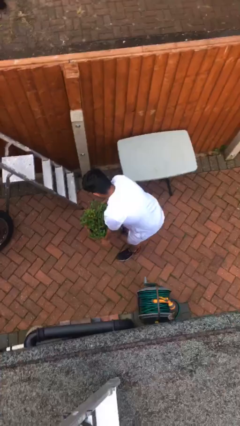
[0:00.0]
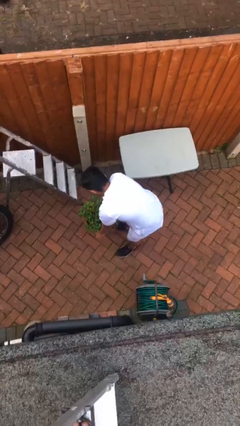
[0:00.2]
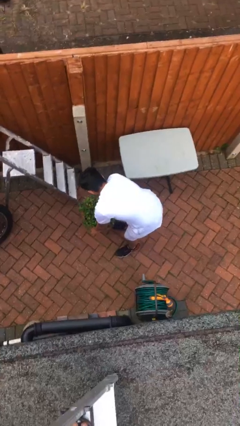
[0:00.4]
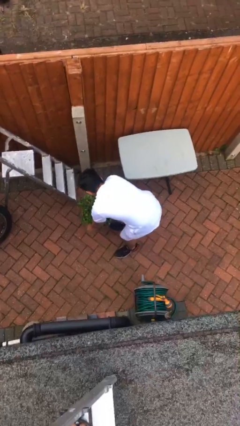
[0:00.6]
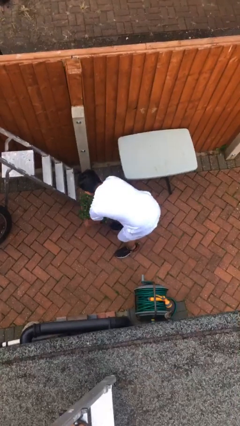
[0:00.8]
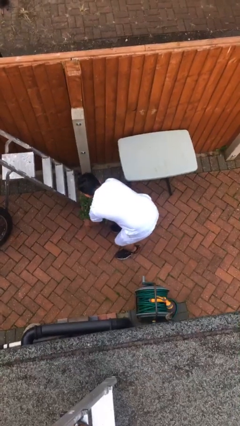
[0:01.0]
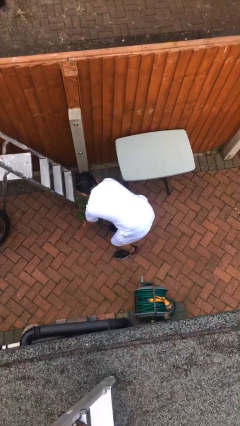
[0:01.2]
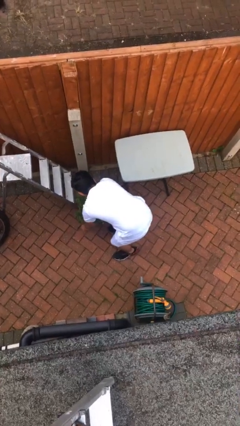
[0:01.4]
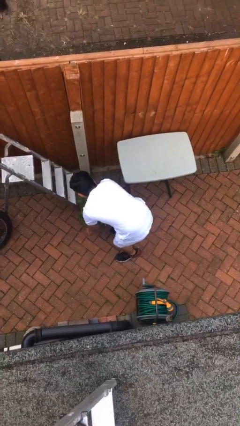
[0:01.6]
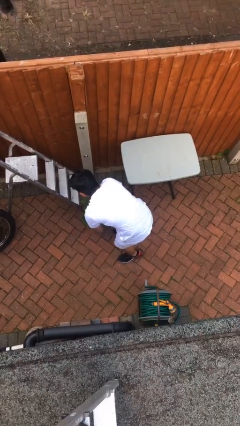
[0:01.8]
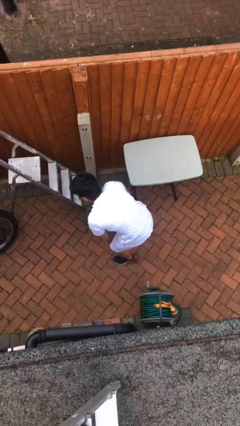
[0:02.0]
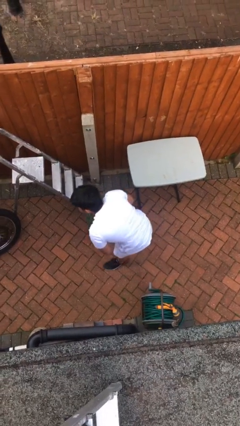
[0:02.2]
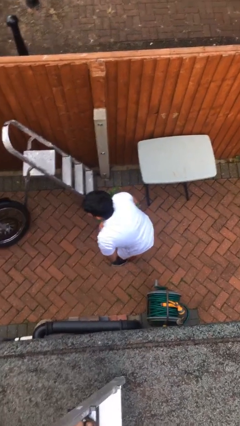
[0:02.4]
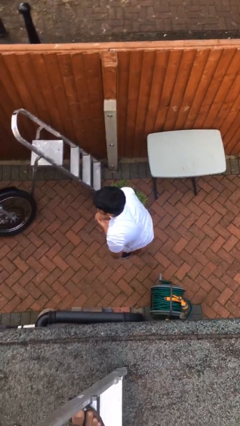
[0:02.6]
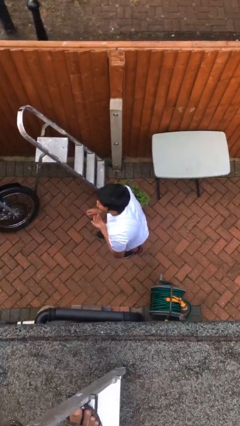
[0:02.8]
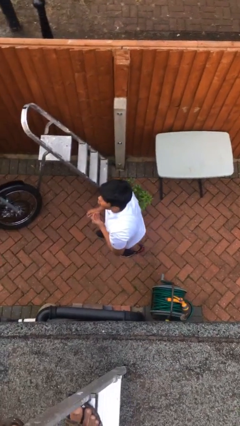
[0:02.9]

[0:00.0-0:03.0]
person puts down object on floor

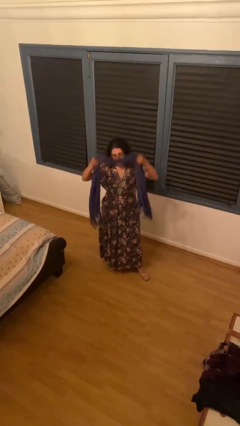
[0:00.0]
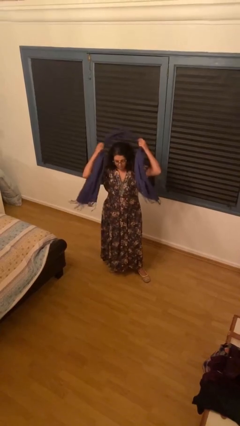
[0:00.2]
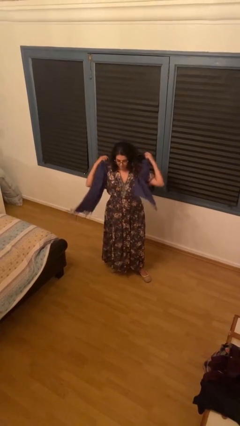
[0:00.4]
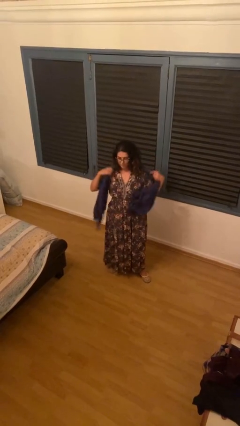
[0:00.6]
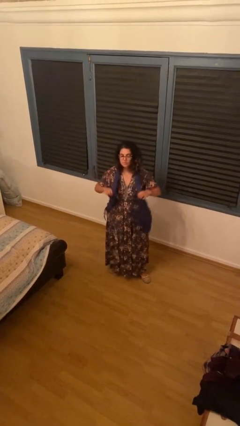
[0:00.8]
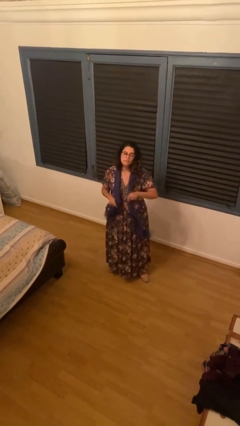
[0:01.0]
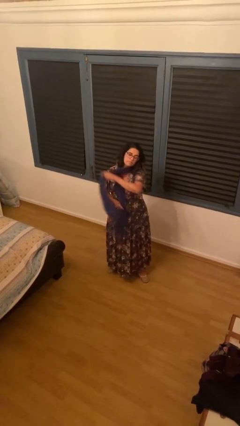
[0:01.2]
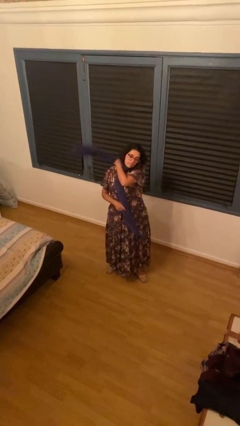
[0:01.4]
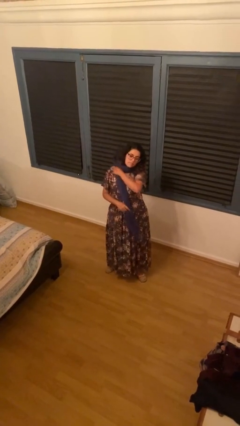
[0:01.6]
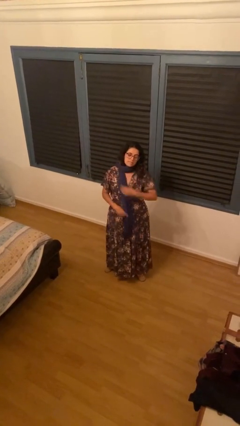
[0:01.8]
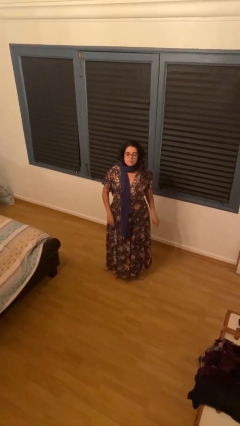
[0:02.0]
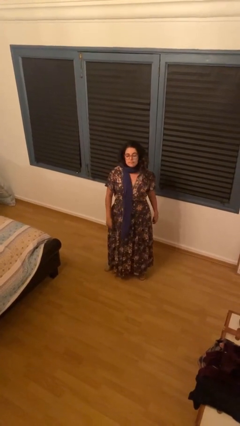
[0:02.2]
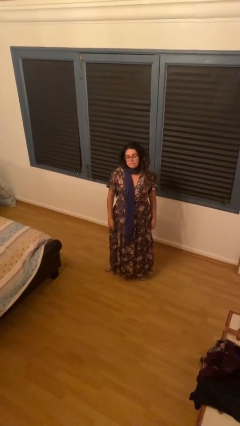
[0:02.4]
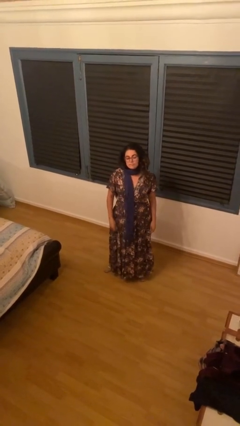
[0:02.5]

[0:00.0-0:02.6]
person puts on scarf

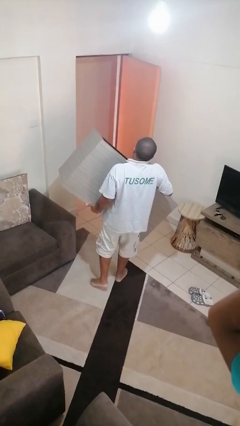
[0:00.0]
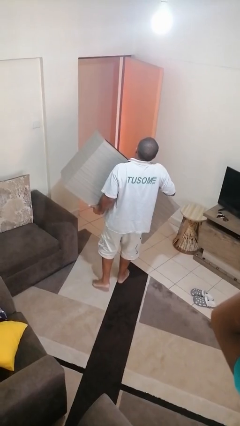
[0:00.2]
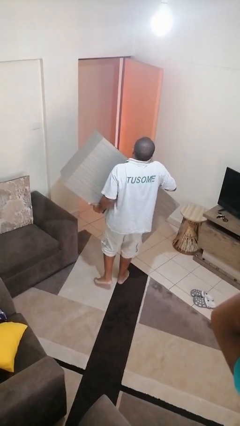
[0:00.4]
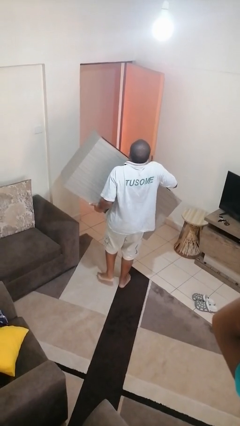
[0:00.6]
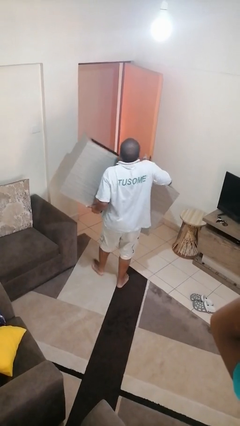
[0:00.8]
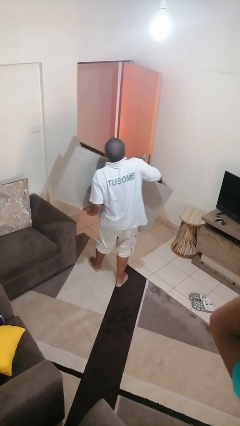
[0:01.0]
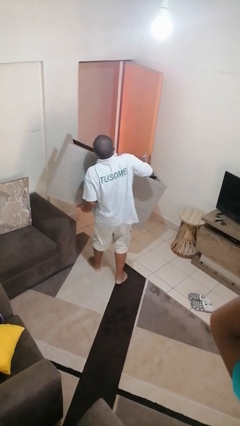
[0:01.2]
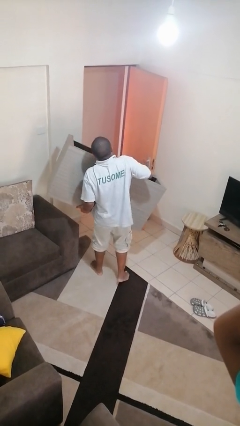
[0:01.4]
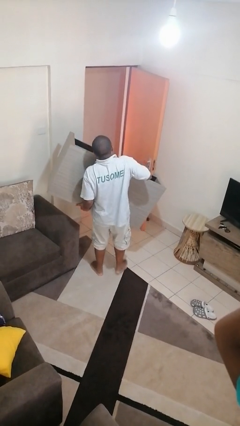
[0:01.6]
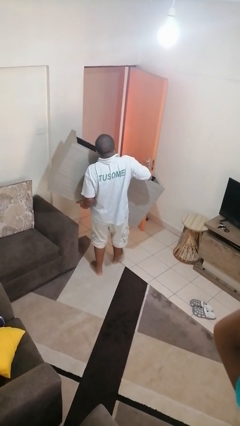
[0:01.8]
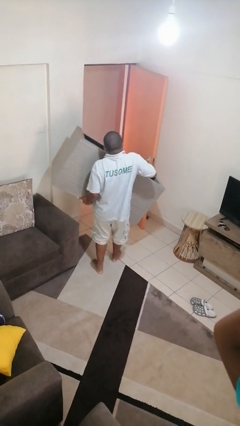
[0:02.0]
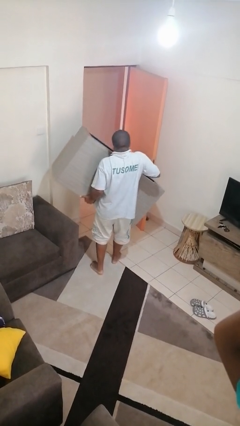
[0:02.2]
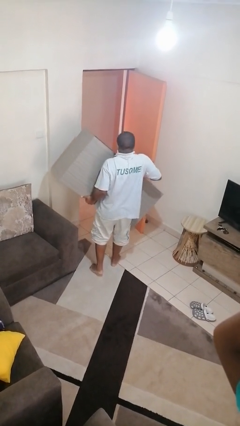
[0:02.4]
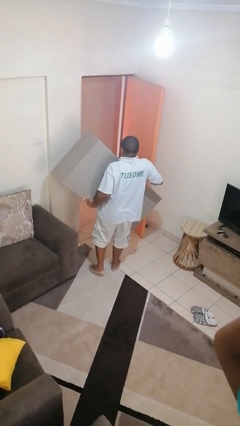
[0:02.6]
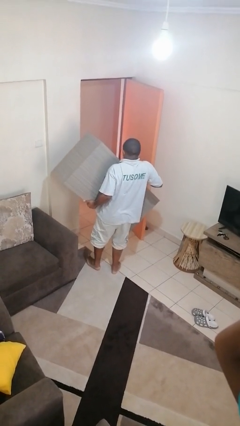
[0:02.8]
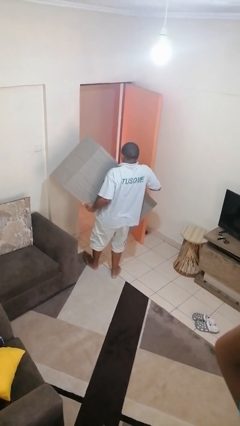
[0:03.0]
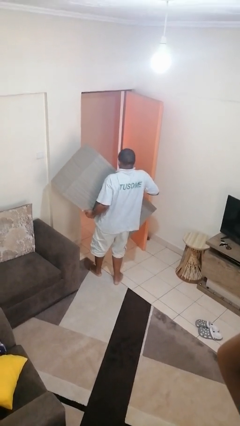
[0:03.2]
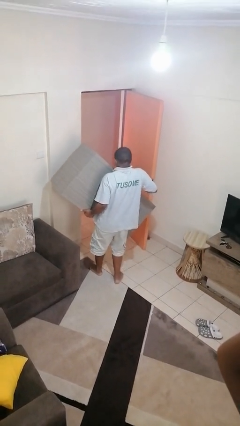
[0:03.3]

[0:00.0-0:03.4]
person carries furniture

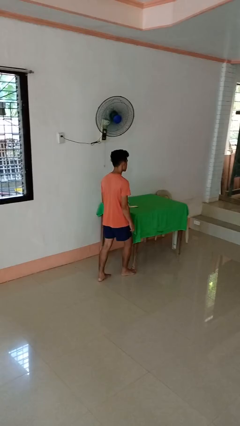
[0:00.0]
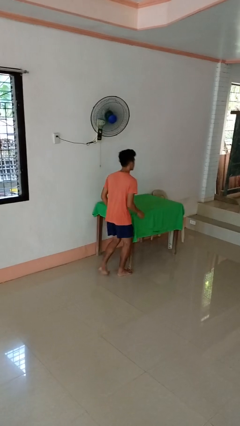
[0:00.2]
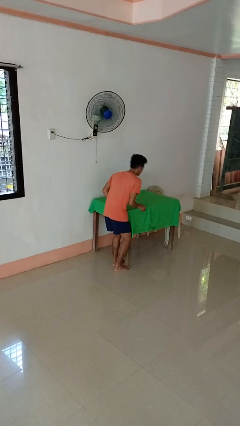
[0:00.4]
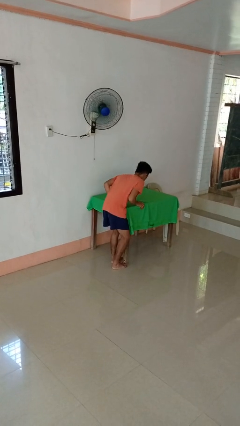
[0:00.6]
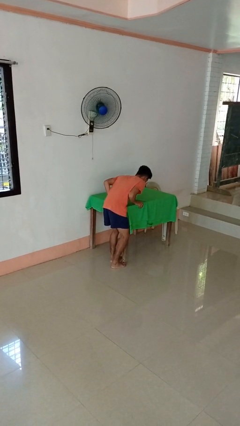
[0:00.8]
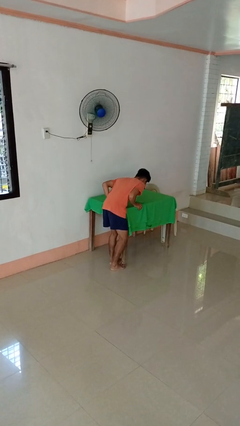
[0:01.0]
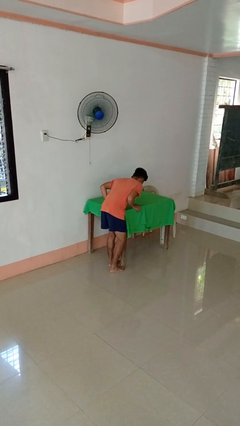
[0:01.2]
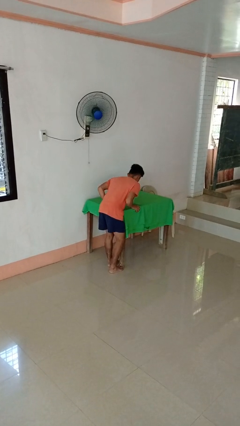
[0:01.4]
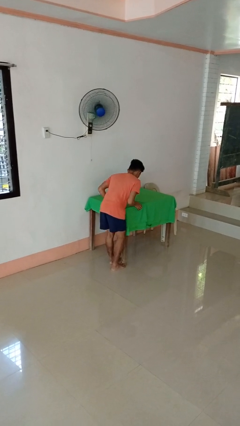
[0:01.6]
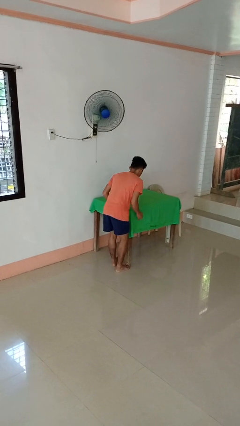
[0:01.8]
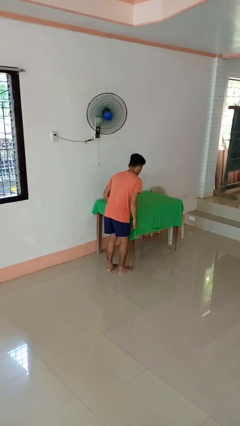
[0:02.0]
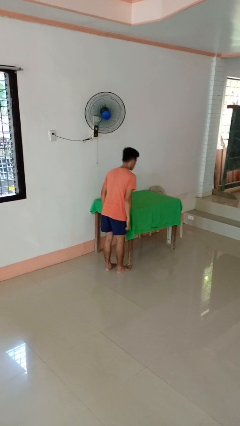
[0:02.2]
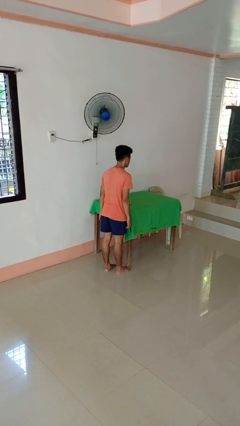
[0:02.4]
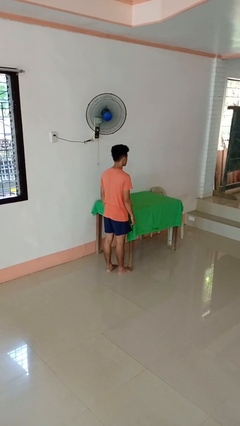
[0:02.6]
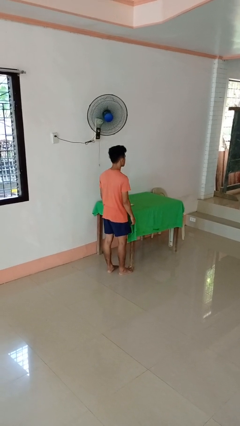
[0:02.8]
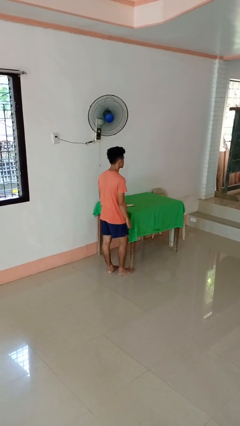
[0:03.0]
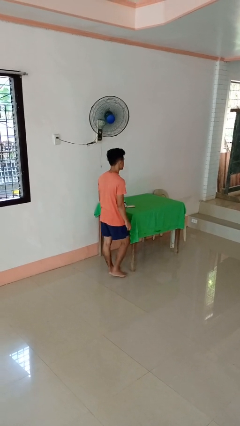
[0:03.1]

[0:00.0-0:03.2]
person stubs toe

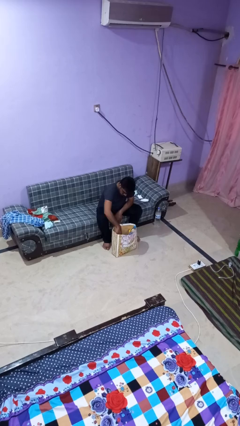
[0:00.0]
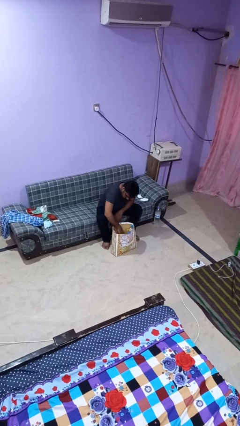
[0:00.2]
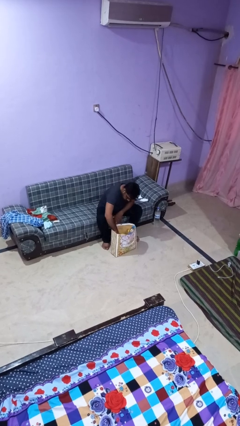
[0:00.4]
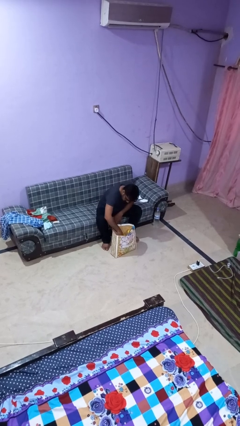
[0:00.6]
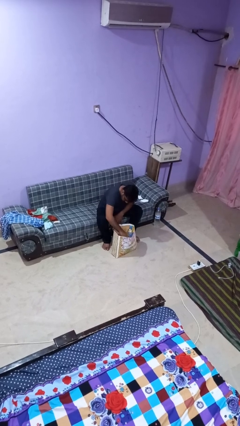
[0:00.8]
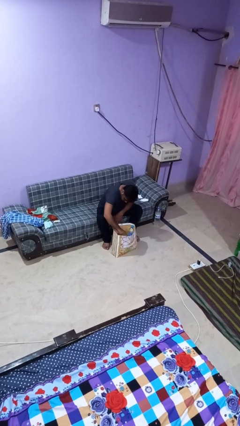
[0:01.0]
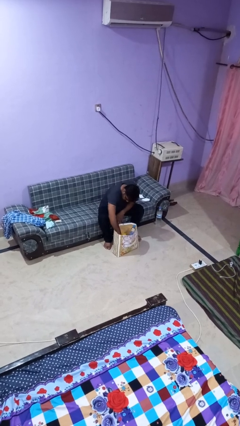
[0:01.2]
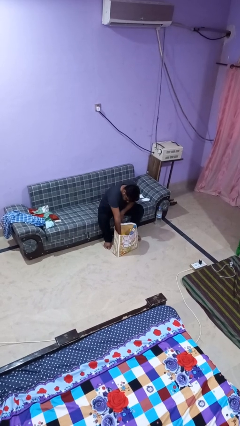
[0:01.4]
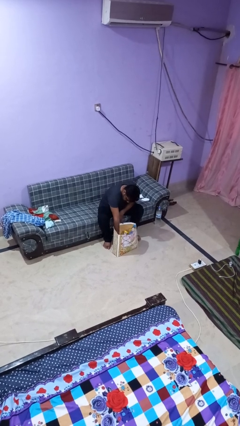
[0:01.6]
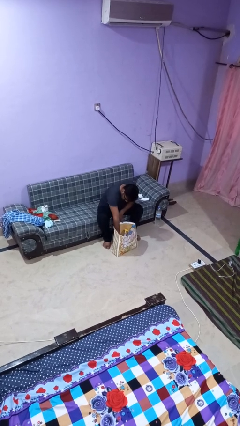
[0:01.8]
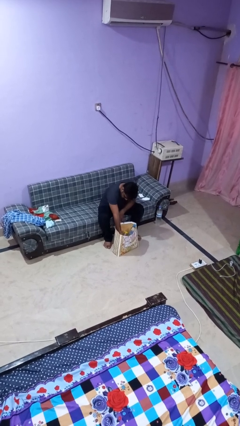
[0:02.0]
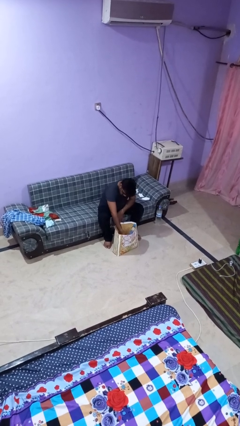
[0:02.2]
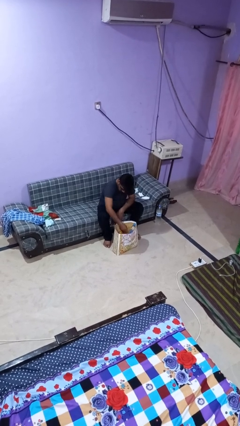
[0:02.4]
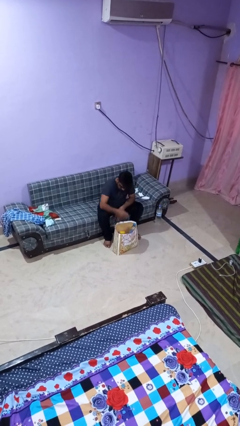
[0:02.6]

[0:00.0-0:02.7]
person searches in bag

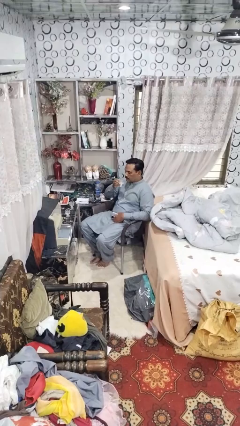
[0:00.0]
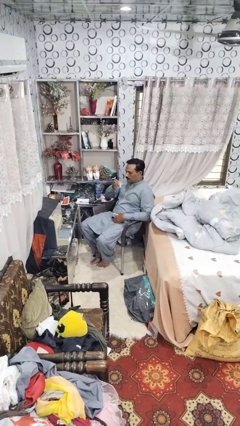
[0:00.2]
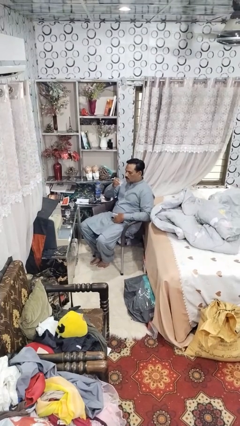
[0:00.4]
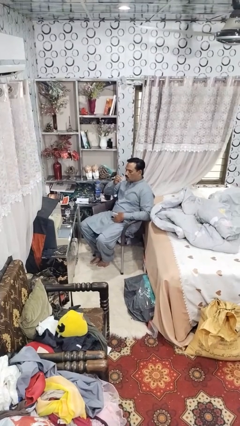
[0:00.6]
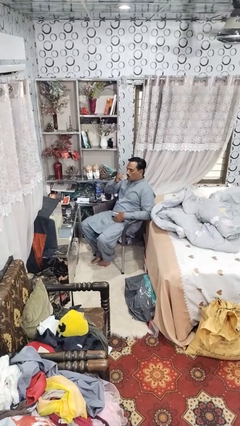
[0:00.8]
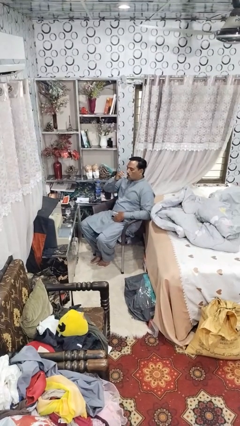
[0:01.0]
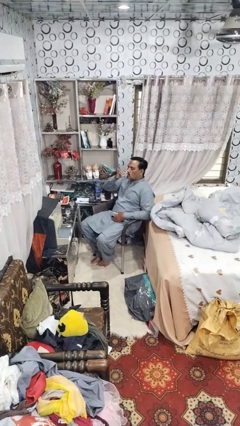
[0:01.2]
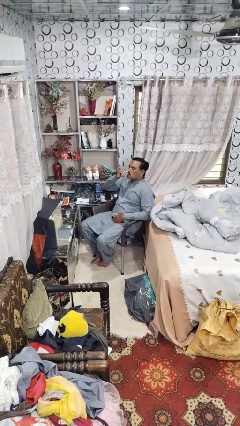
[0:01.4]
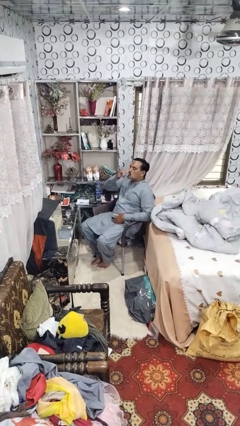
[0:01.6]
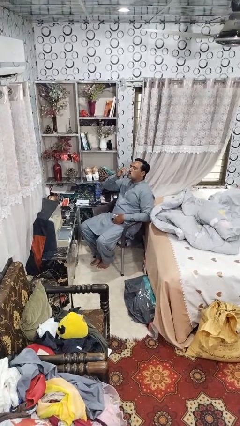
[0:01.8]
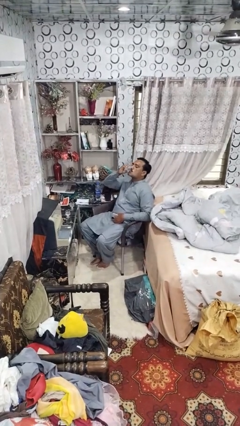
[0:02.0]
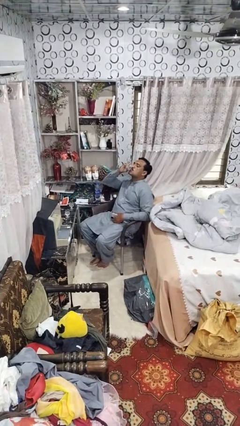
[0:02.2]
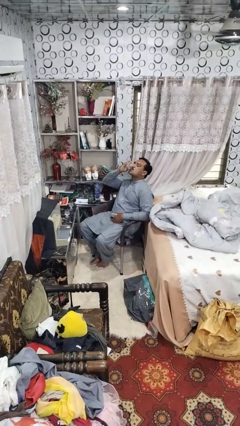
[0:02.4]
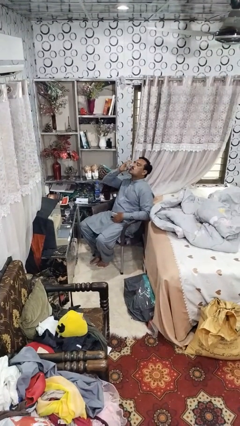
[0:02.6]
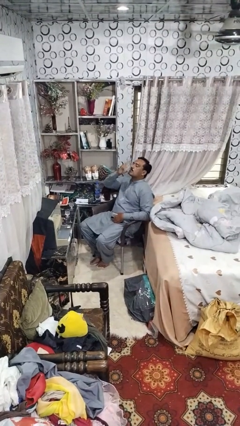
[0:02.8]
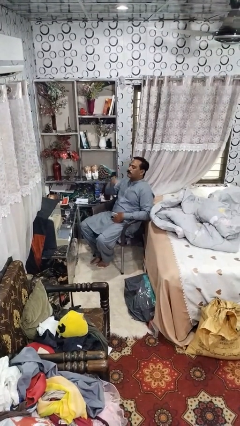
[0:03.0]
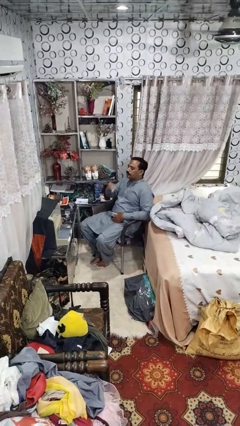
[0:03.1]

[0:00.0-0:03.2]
person drinks from shotglass
